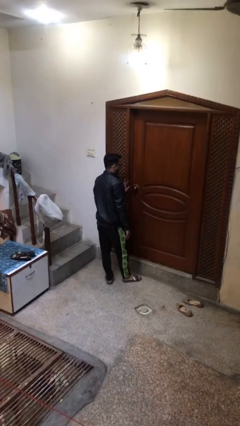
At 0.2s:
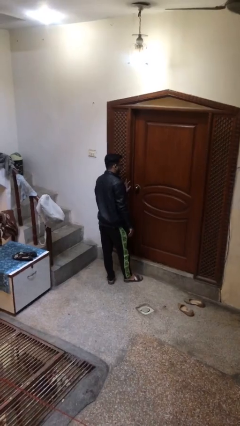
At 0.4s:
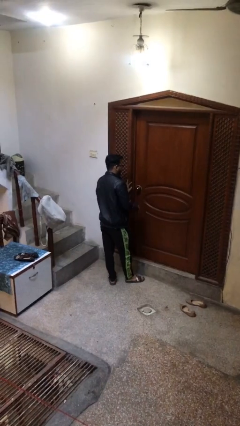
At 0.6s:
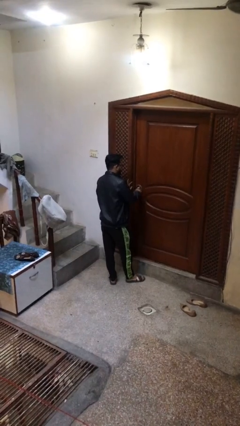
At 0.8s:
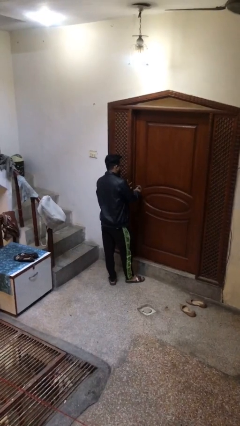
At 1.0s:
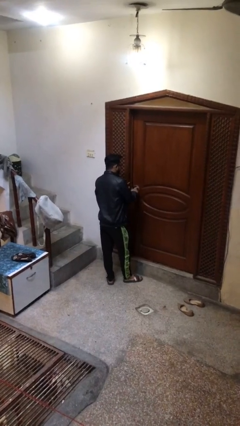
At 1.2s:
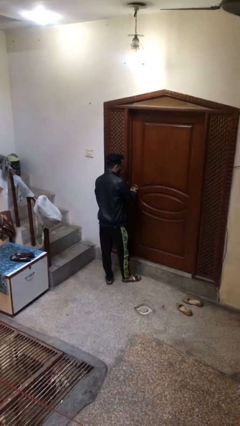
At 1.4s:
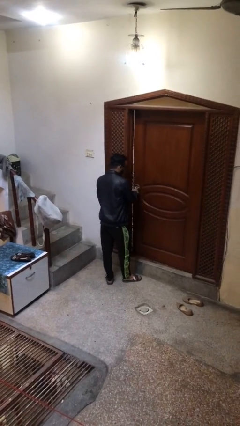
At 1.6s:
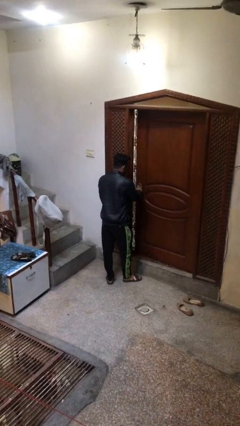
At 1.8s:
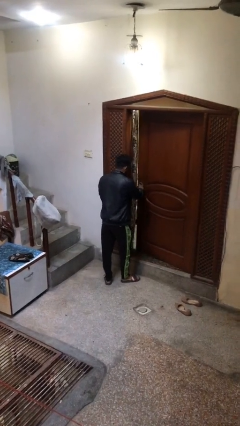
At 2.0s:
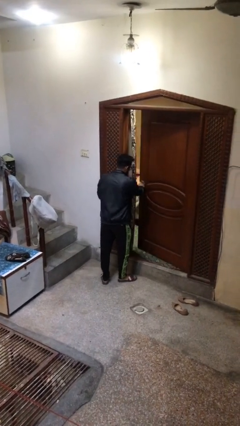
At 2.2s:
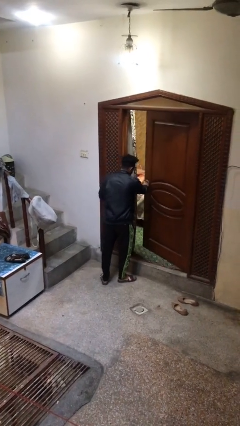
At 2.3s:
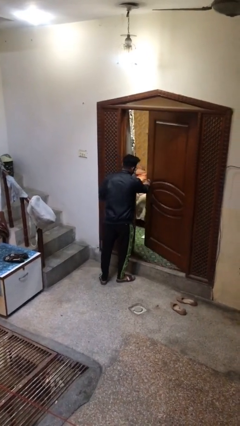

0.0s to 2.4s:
person opens facility door

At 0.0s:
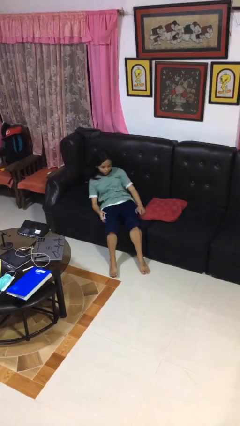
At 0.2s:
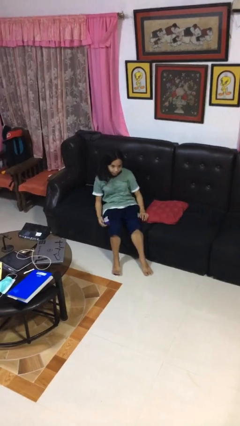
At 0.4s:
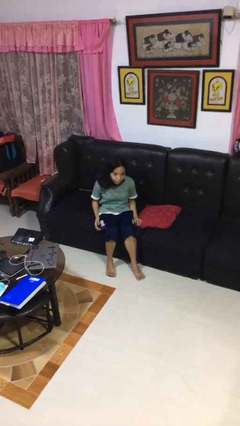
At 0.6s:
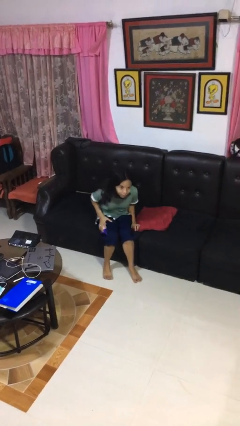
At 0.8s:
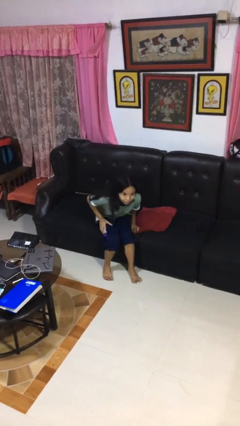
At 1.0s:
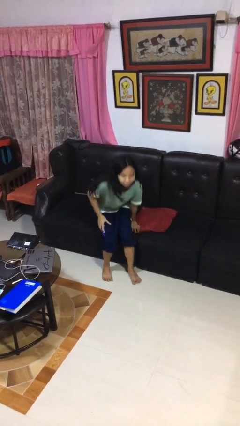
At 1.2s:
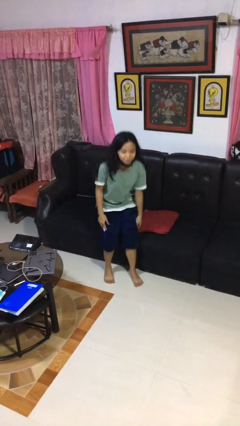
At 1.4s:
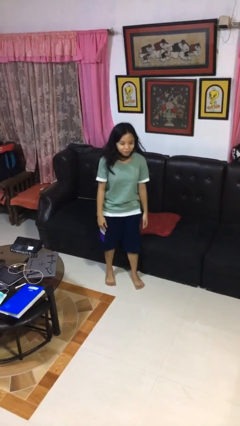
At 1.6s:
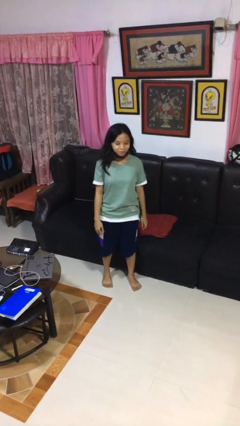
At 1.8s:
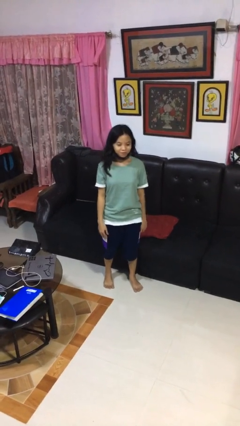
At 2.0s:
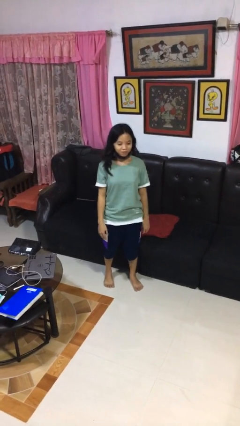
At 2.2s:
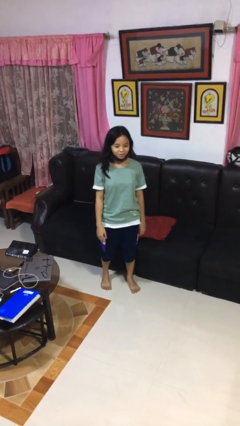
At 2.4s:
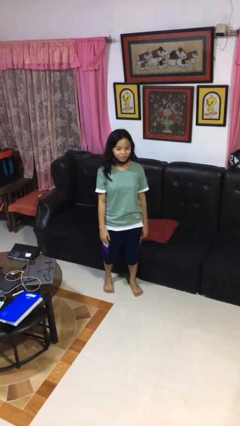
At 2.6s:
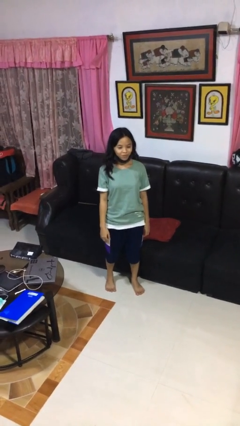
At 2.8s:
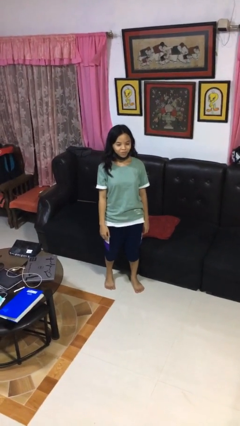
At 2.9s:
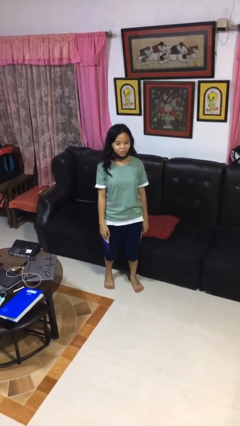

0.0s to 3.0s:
person stands up

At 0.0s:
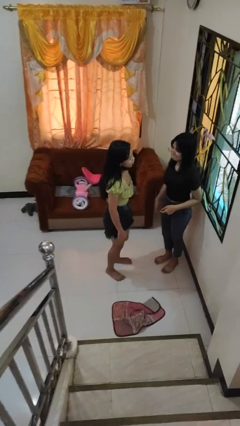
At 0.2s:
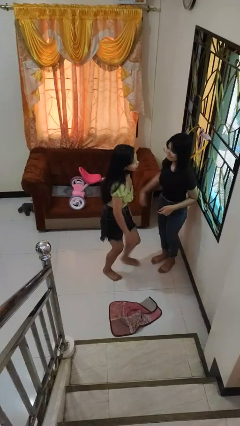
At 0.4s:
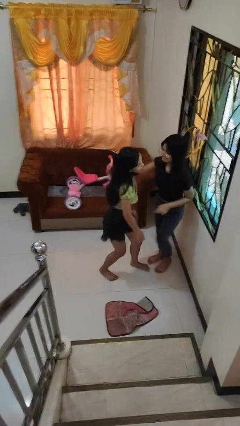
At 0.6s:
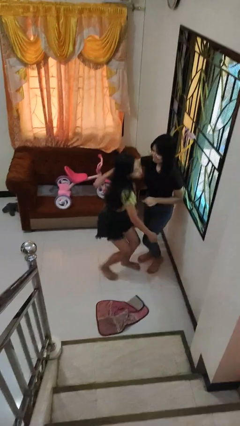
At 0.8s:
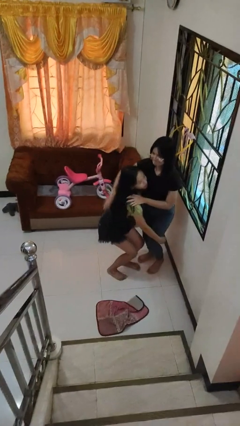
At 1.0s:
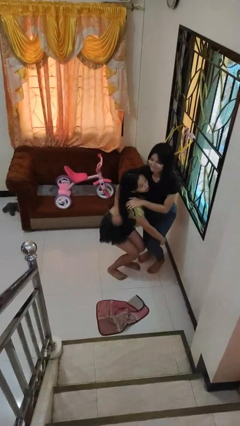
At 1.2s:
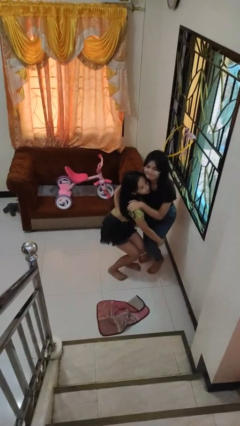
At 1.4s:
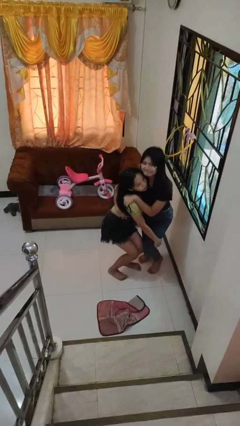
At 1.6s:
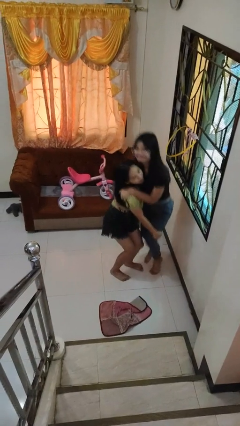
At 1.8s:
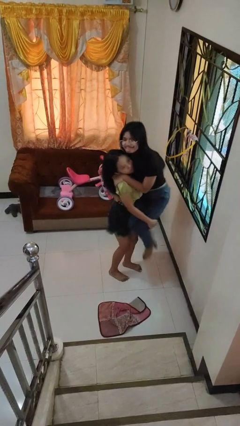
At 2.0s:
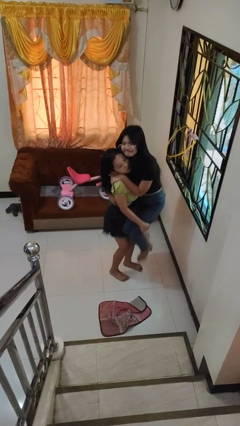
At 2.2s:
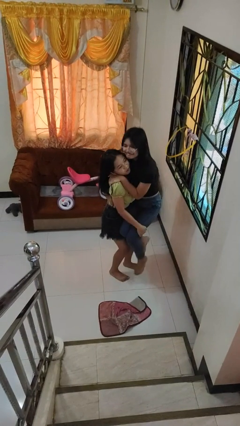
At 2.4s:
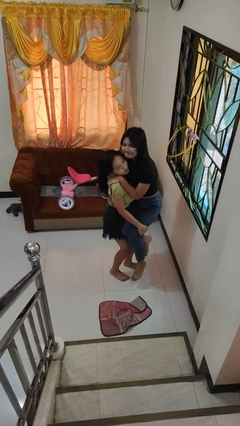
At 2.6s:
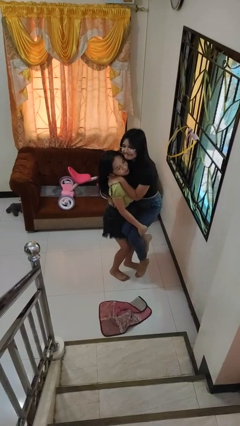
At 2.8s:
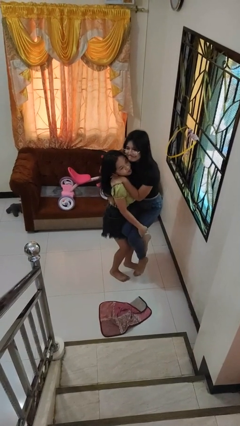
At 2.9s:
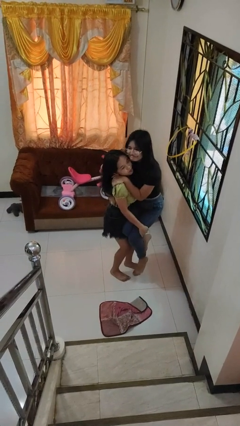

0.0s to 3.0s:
person picks up person

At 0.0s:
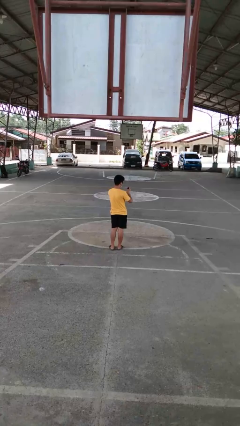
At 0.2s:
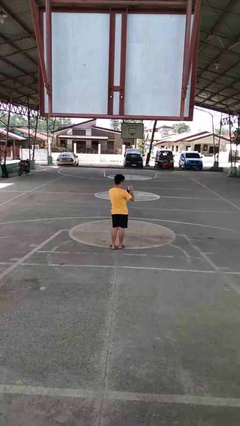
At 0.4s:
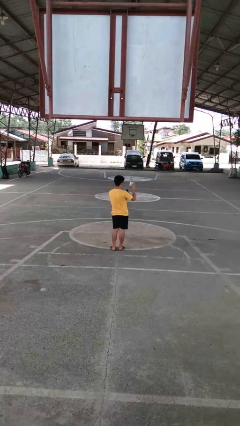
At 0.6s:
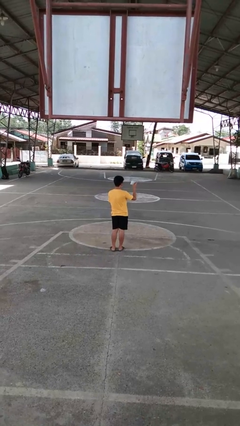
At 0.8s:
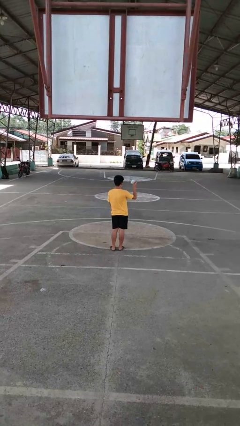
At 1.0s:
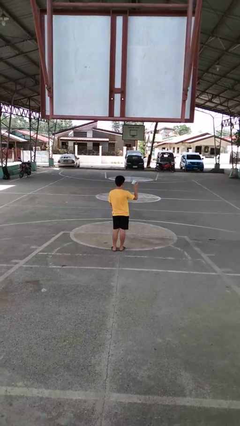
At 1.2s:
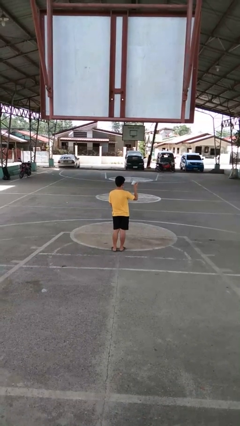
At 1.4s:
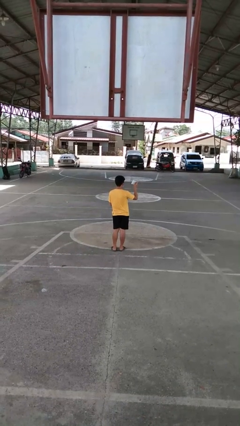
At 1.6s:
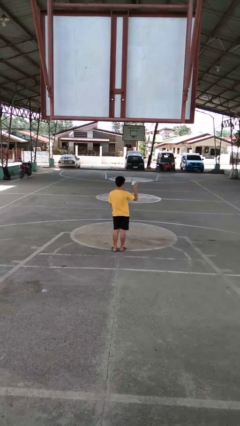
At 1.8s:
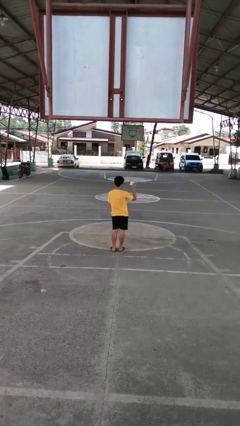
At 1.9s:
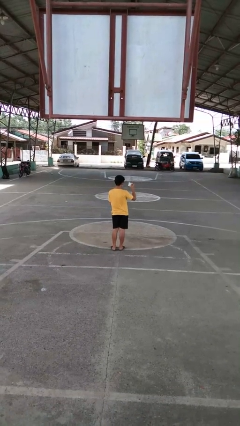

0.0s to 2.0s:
person takes object from purse

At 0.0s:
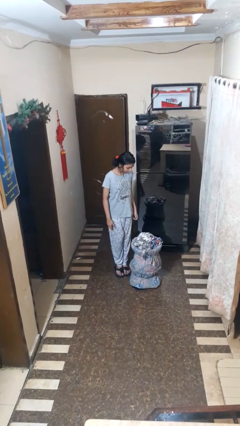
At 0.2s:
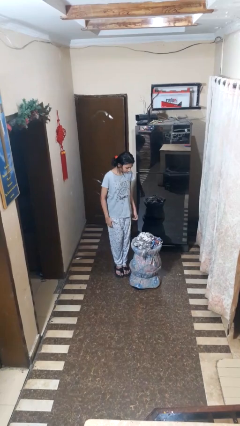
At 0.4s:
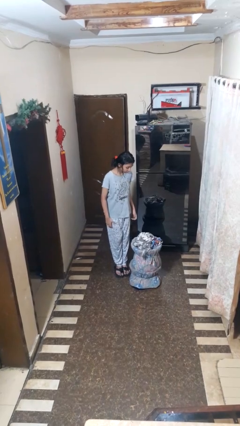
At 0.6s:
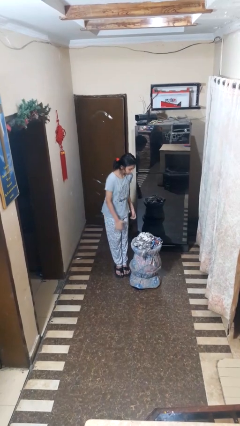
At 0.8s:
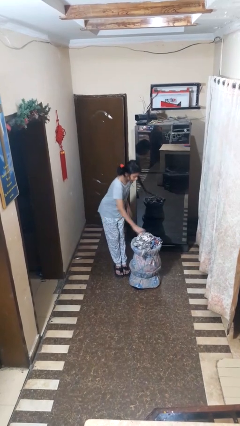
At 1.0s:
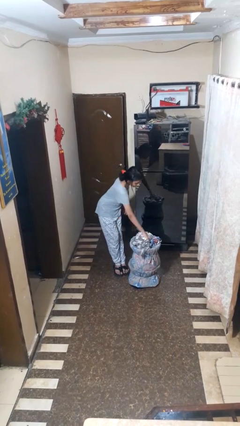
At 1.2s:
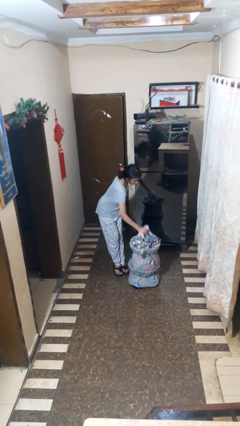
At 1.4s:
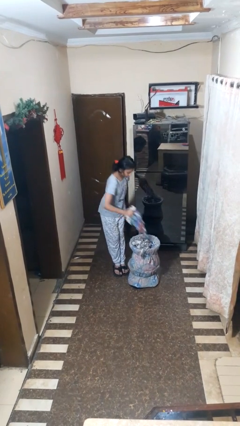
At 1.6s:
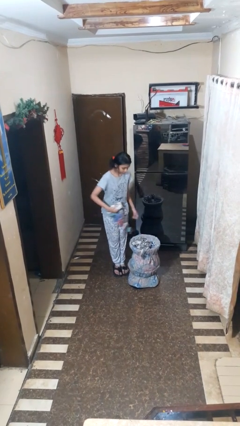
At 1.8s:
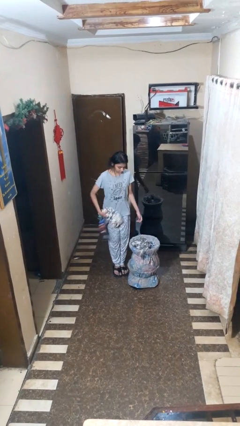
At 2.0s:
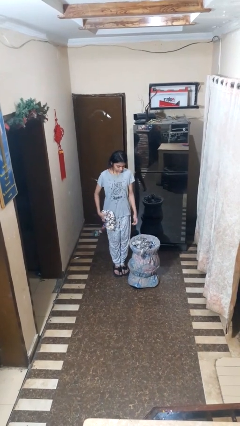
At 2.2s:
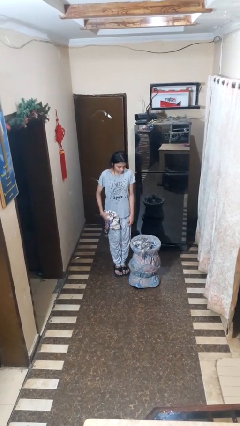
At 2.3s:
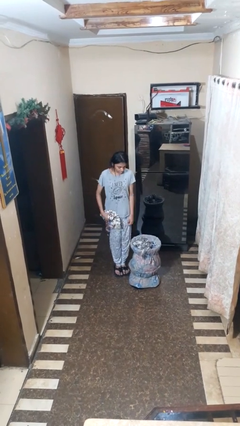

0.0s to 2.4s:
person puts object into basket

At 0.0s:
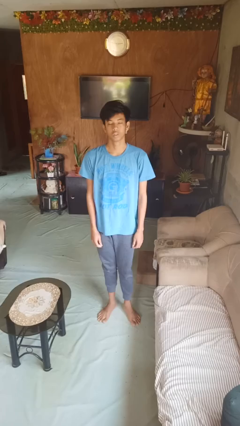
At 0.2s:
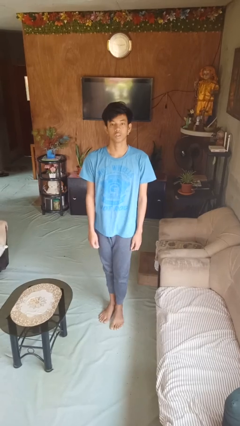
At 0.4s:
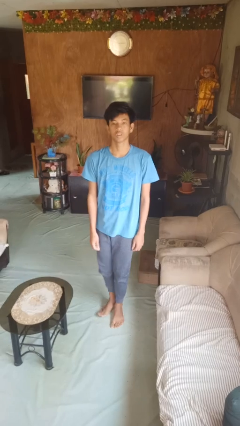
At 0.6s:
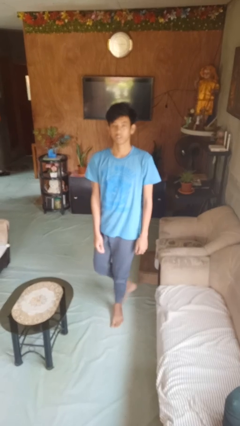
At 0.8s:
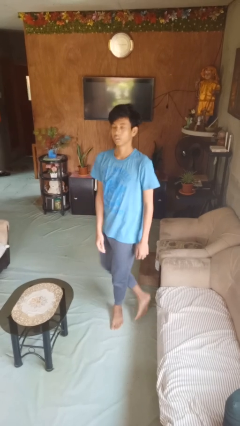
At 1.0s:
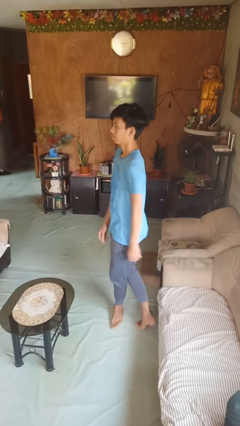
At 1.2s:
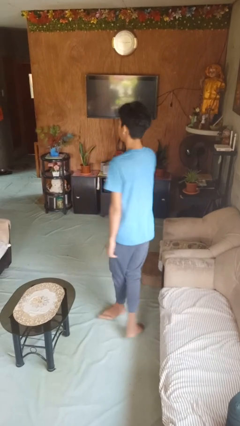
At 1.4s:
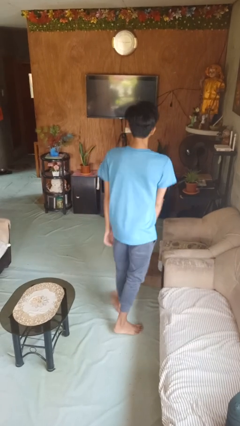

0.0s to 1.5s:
person twirls

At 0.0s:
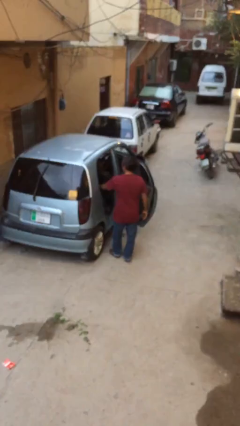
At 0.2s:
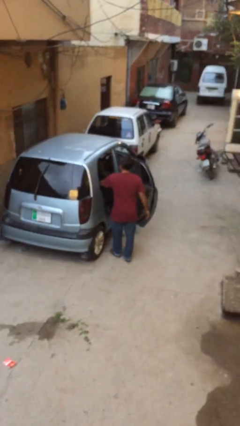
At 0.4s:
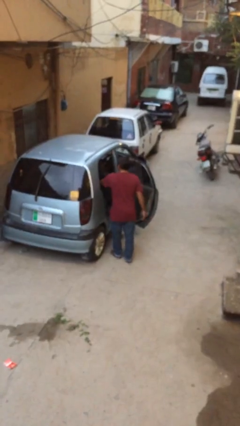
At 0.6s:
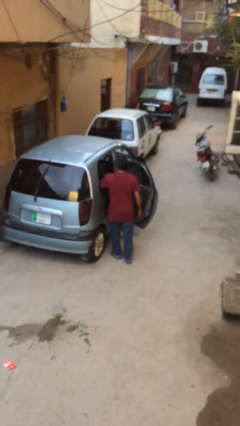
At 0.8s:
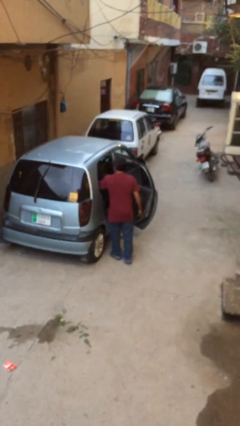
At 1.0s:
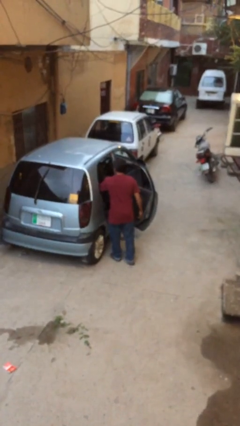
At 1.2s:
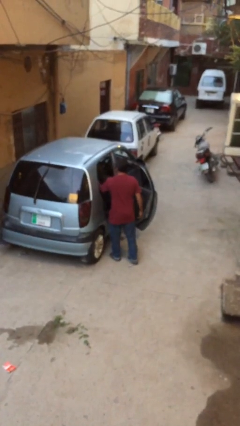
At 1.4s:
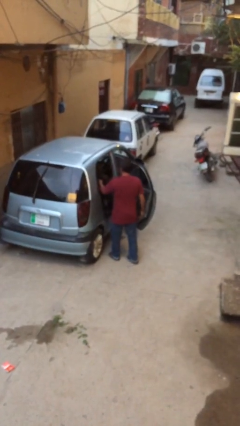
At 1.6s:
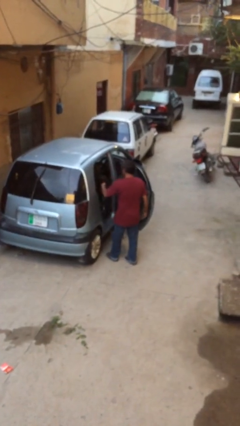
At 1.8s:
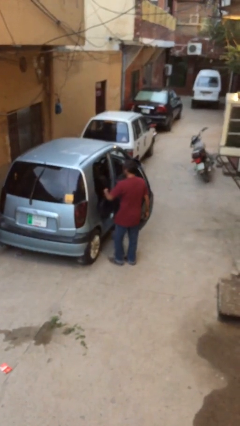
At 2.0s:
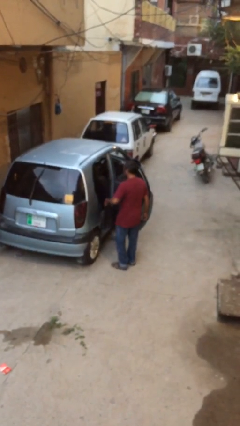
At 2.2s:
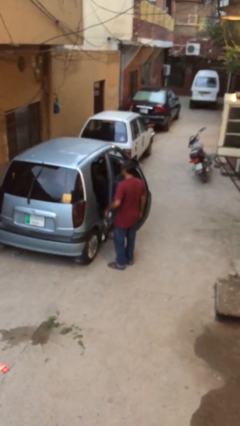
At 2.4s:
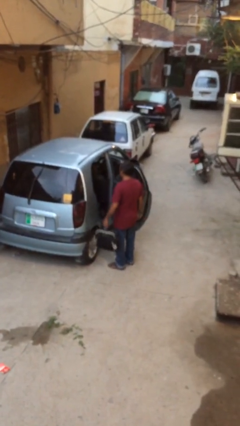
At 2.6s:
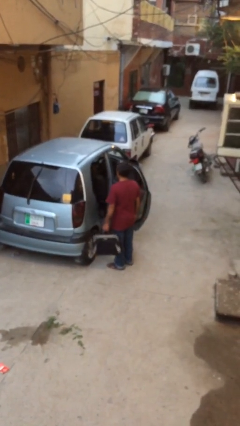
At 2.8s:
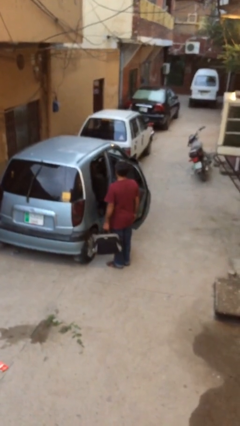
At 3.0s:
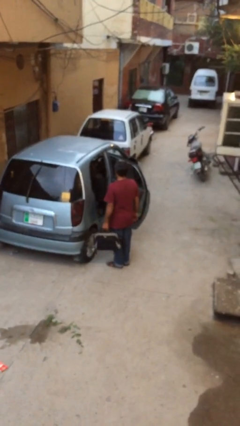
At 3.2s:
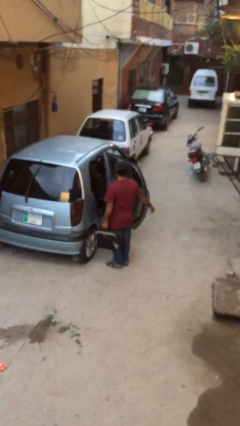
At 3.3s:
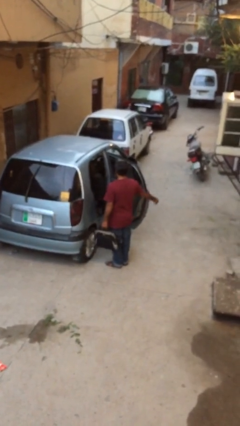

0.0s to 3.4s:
person unloads car
